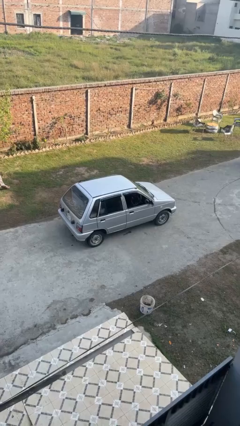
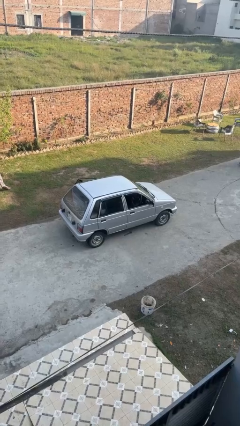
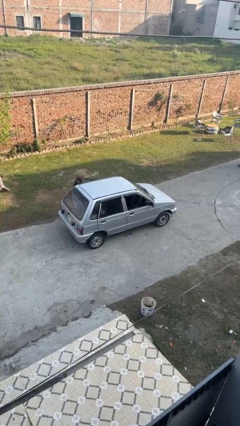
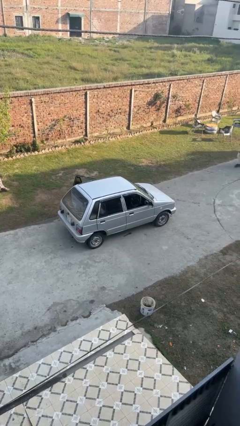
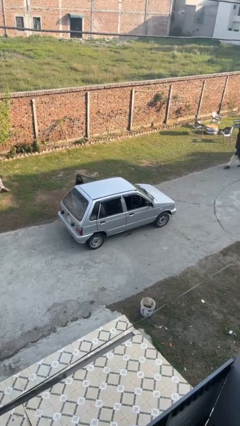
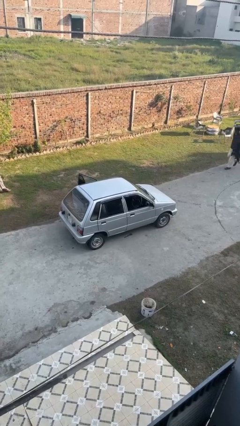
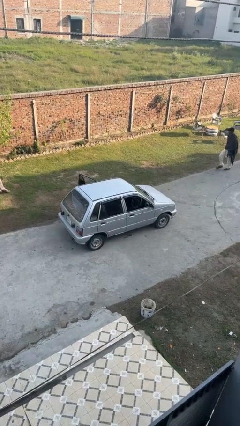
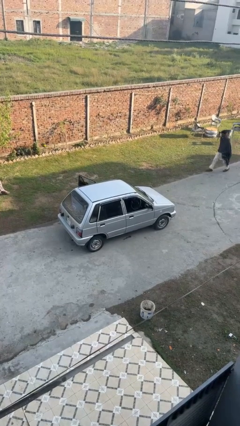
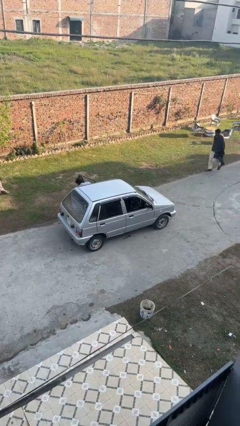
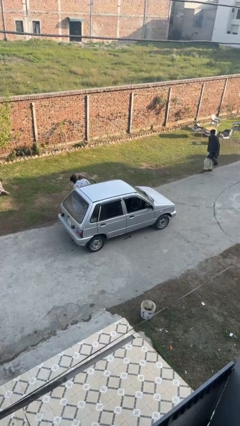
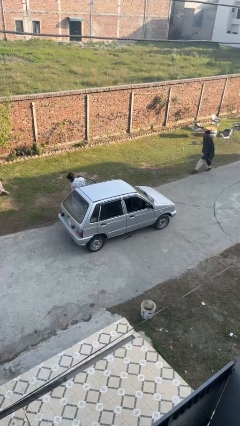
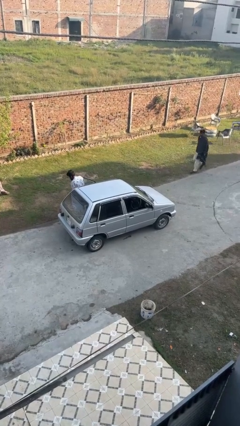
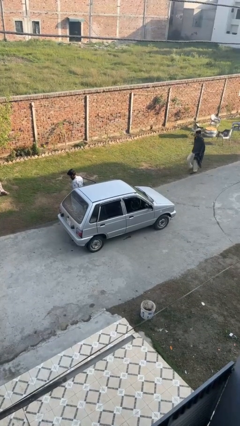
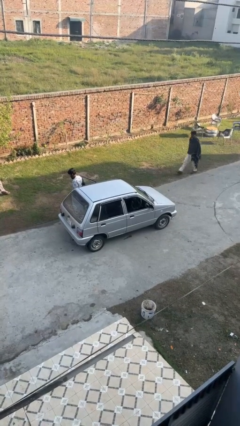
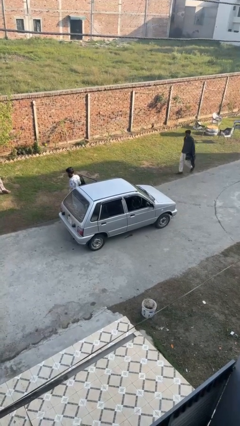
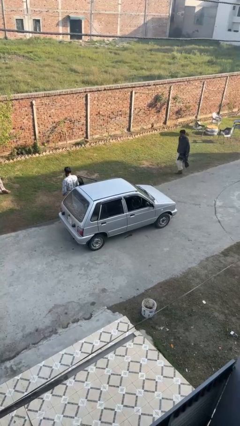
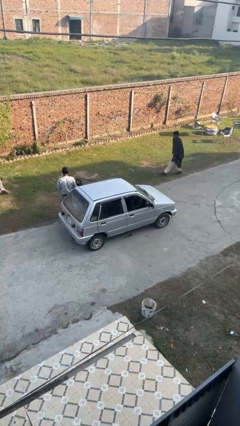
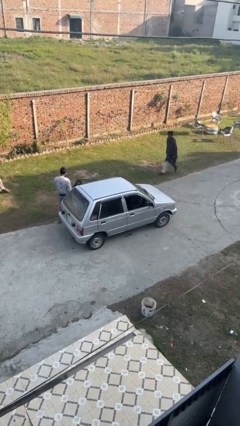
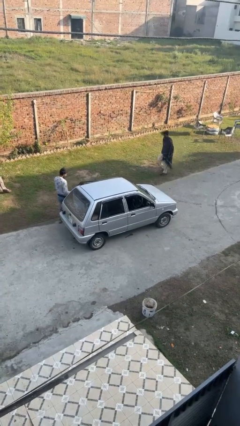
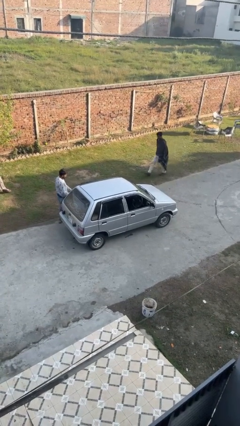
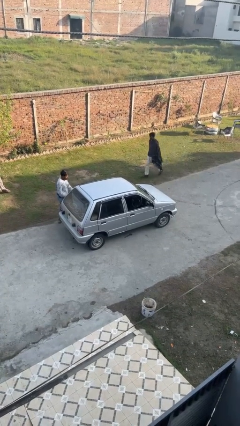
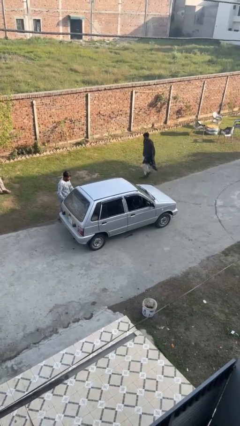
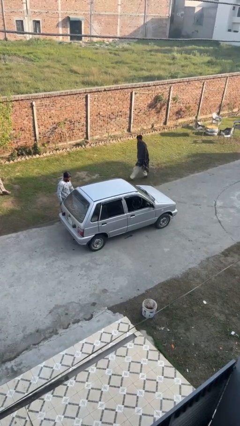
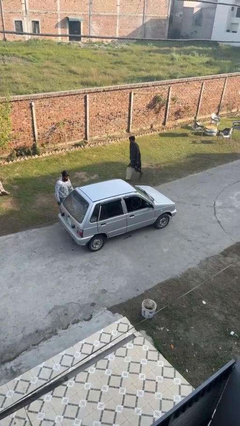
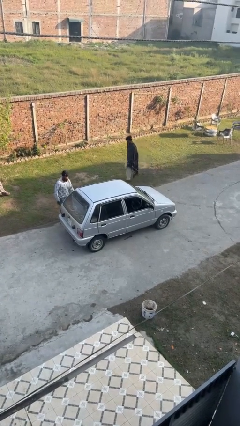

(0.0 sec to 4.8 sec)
car drops off person

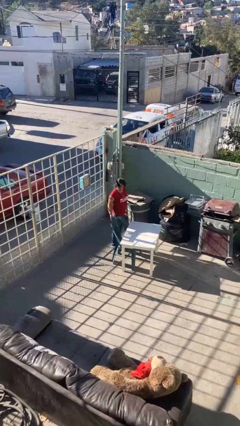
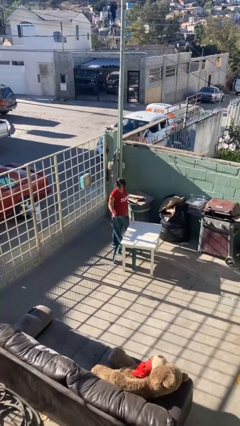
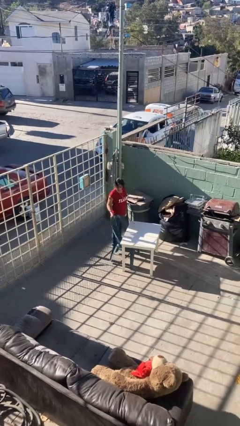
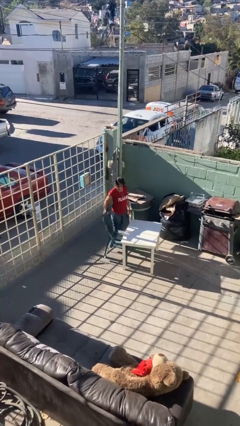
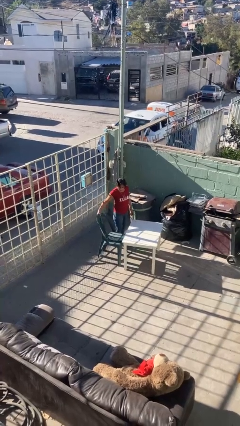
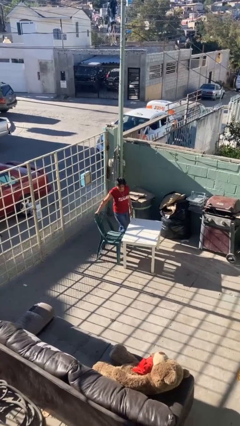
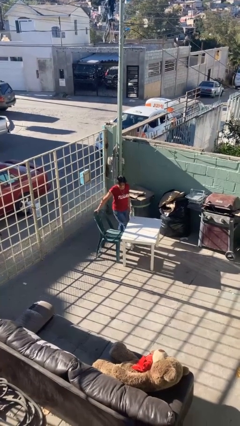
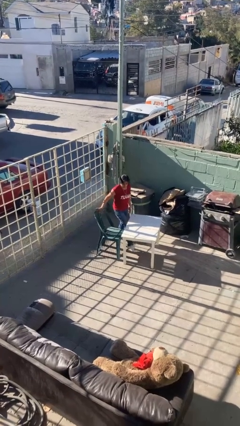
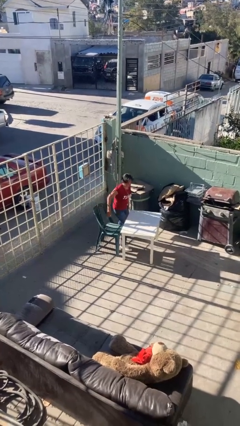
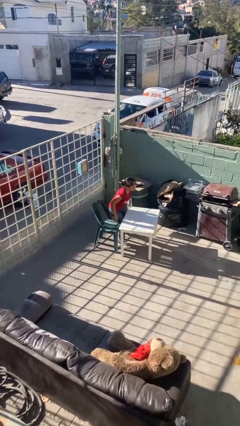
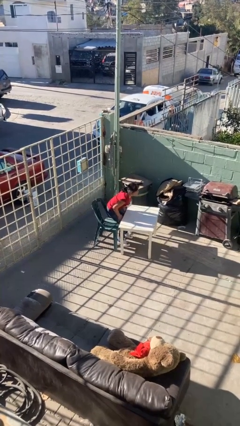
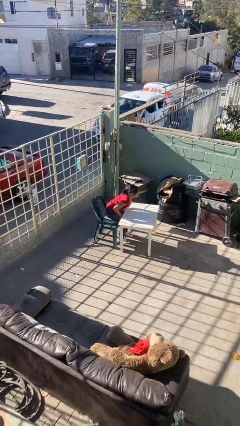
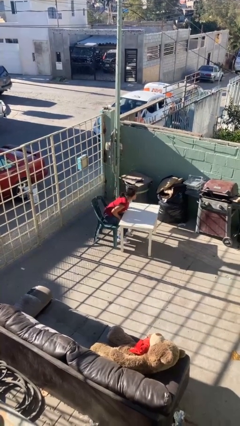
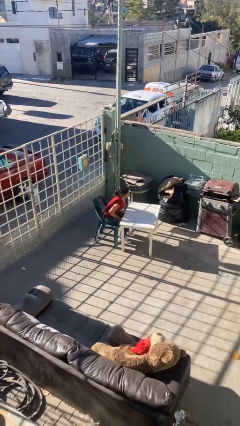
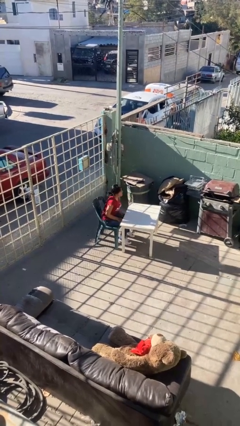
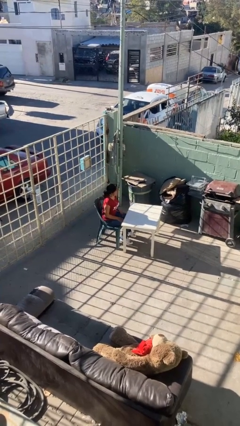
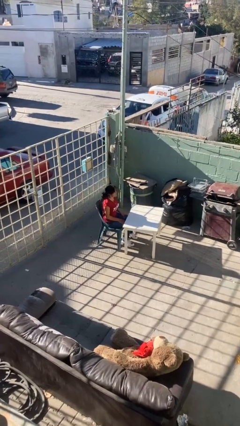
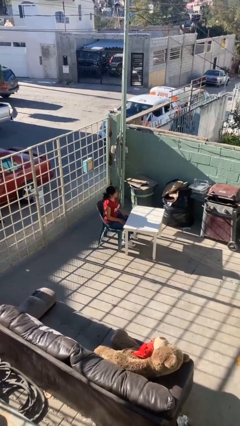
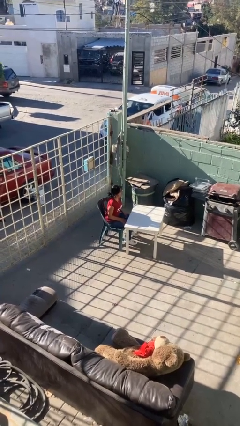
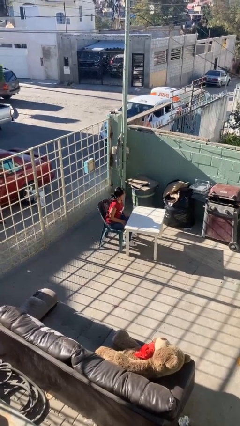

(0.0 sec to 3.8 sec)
person sits down

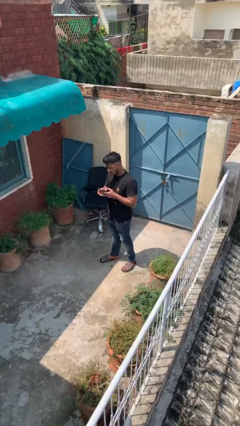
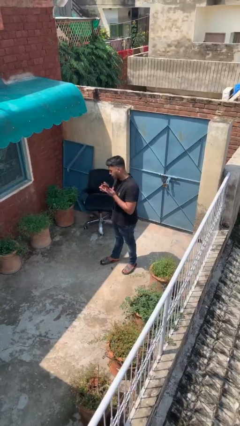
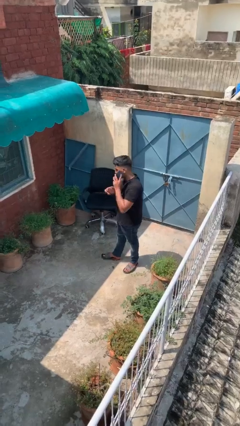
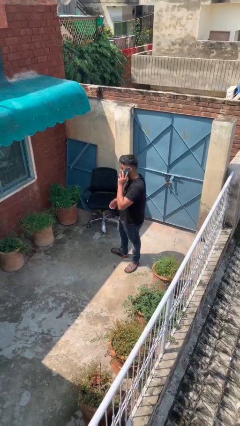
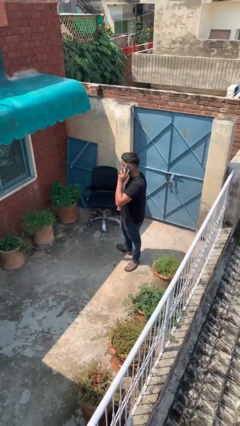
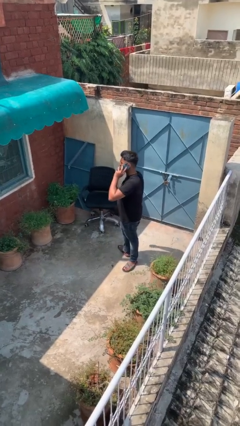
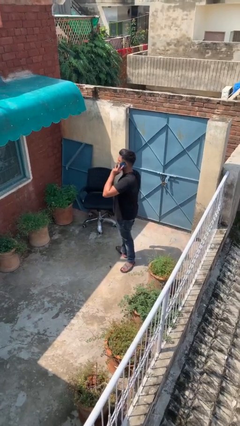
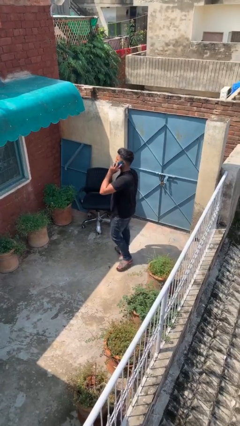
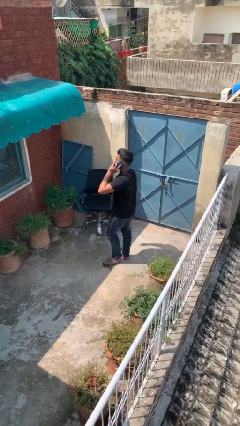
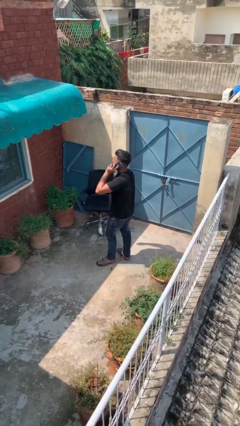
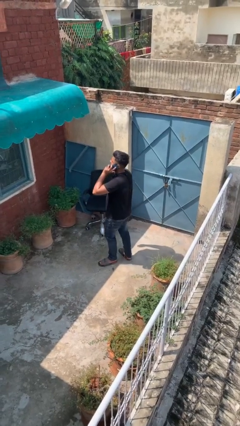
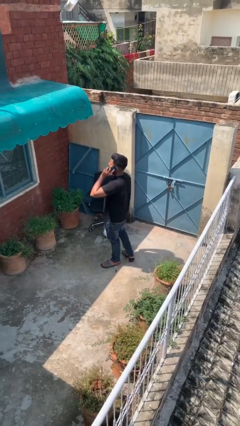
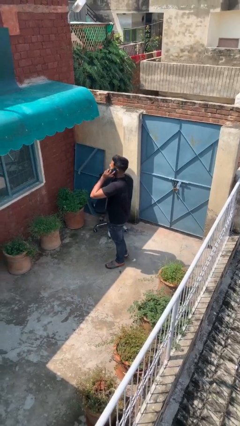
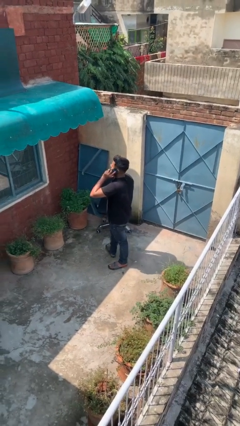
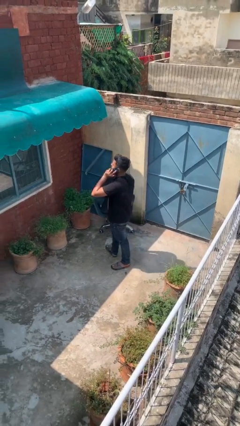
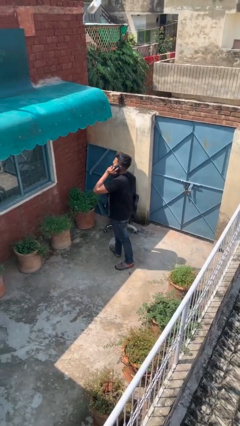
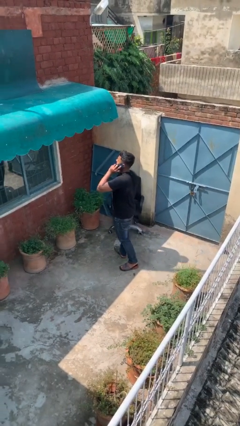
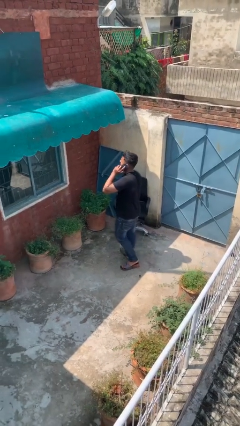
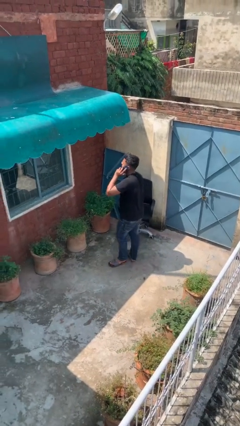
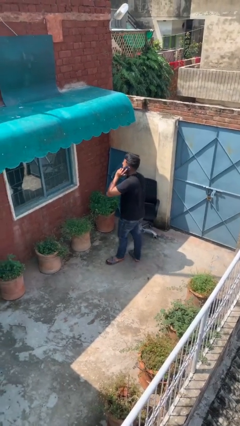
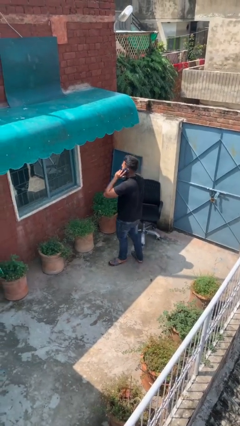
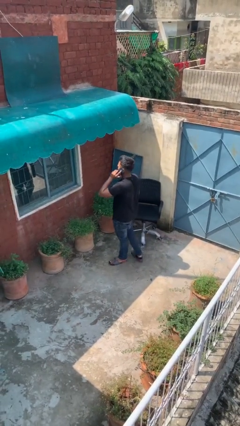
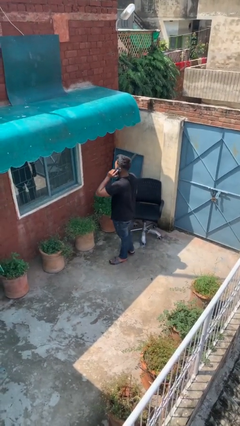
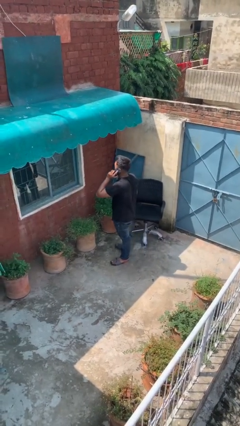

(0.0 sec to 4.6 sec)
person talks on phone

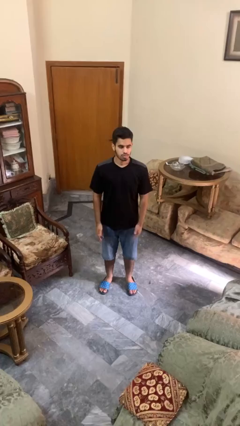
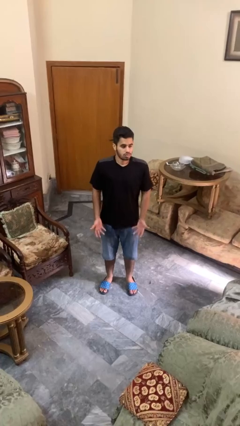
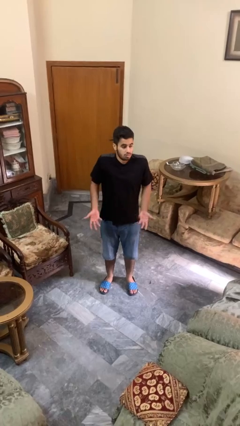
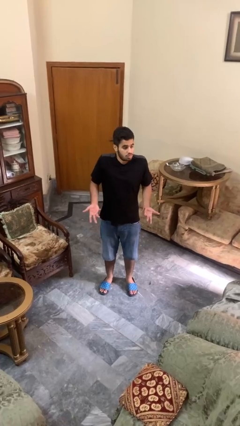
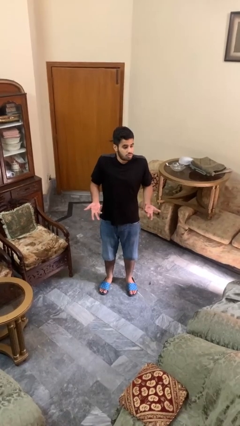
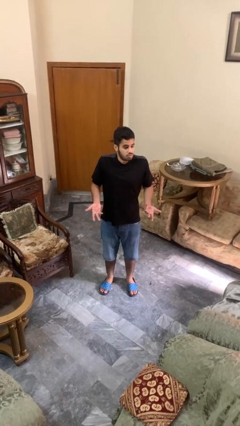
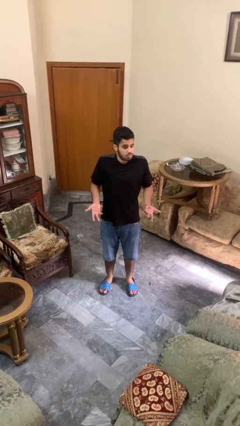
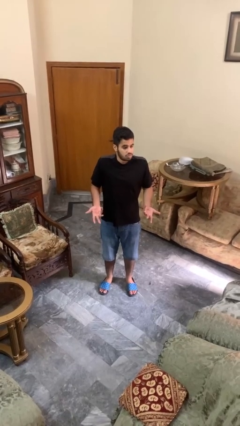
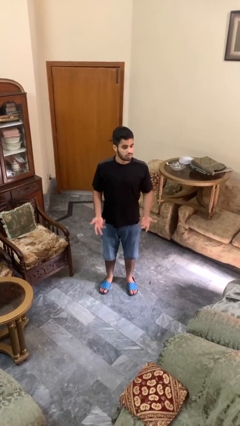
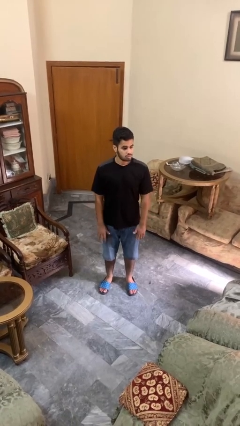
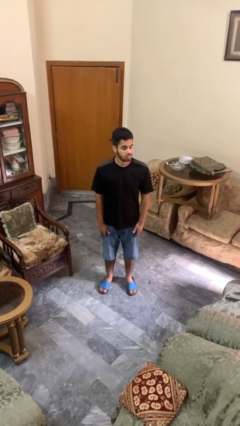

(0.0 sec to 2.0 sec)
person shrugs

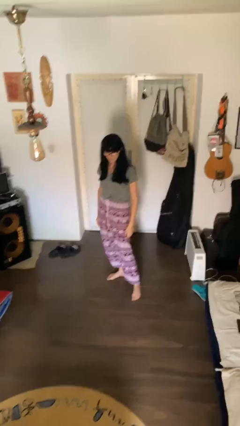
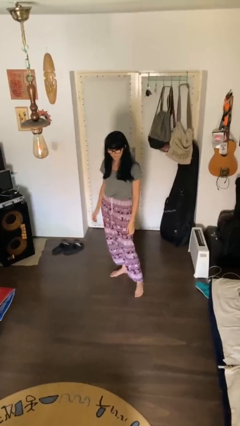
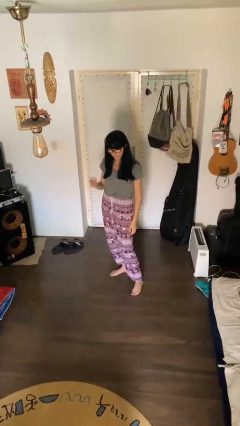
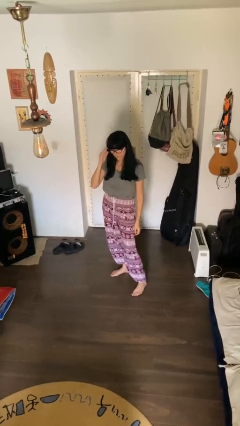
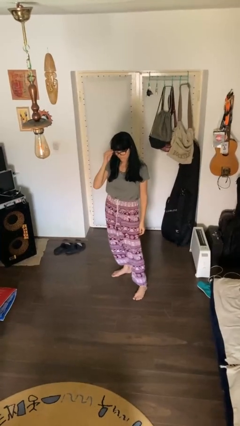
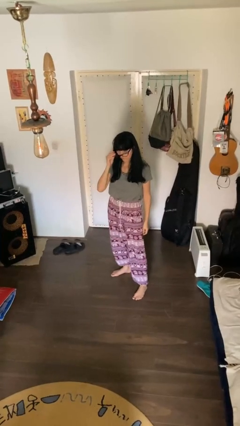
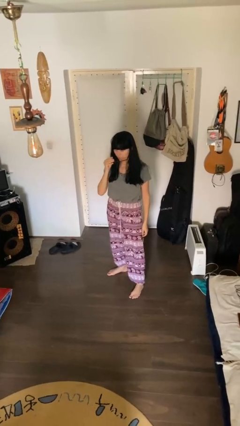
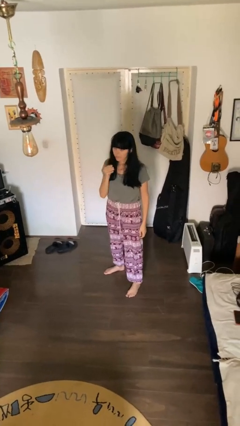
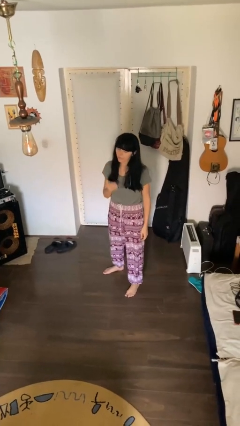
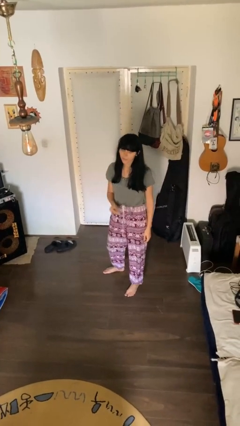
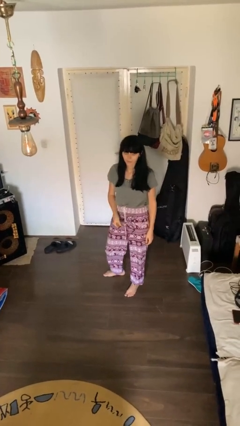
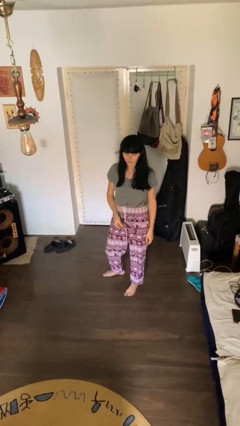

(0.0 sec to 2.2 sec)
person takes off glasses
